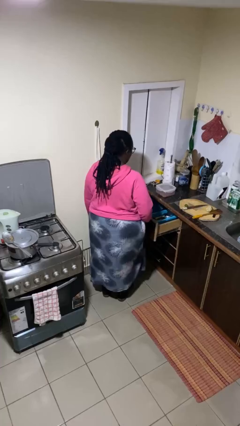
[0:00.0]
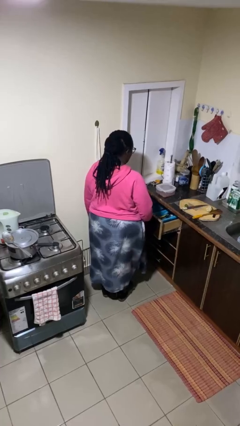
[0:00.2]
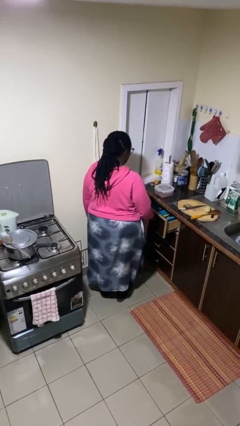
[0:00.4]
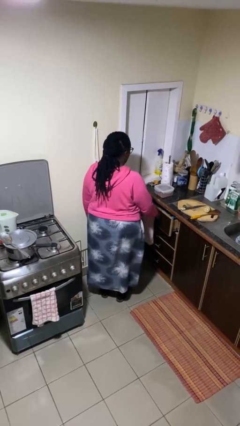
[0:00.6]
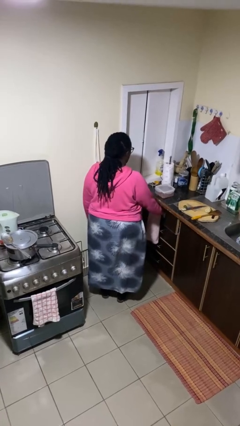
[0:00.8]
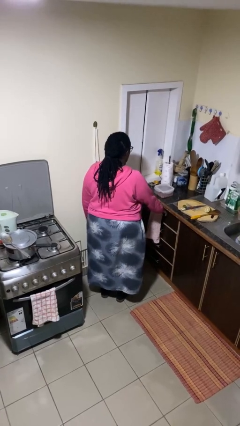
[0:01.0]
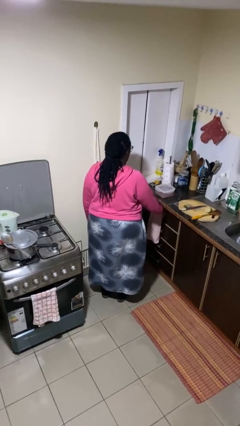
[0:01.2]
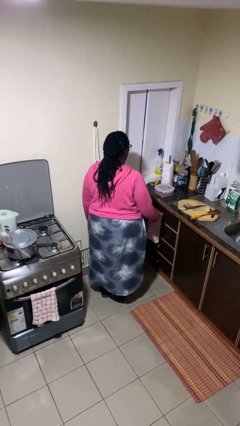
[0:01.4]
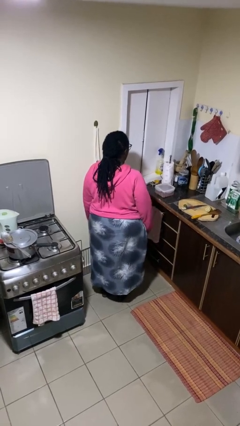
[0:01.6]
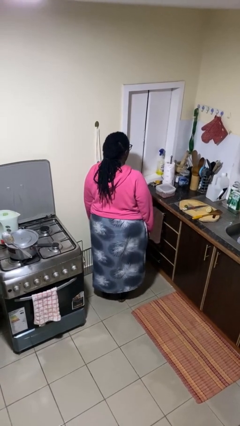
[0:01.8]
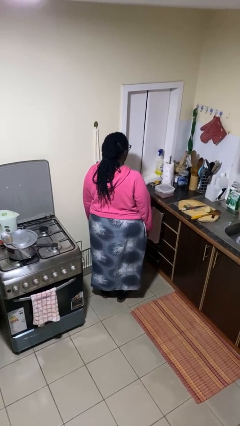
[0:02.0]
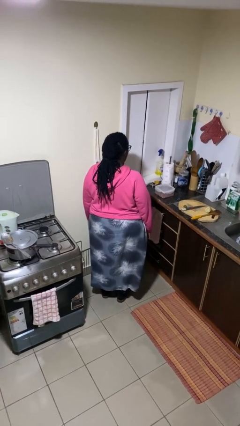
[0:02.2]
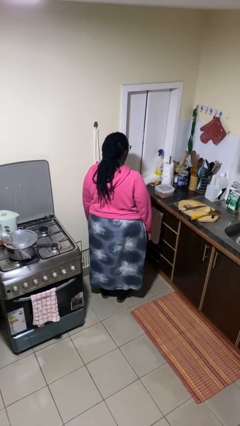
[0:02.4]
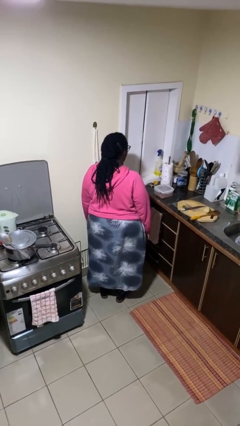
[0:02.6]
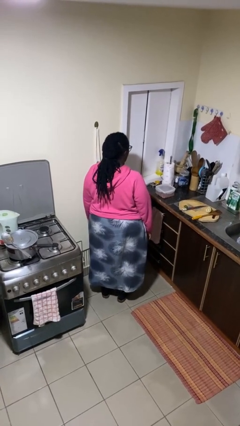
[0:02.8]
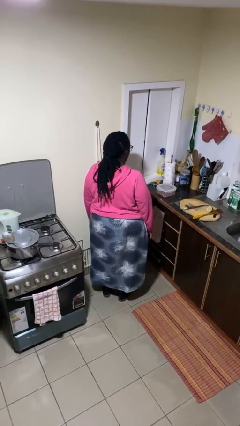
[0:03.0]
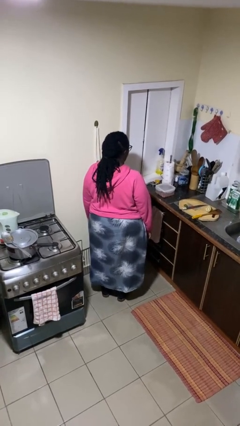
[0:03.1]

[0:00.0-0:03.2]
person closes kitchen drawer

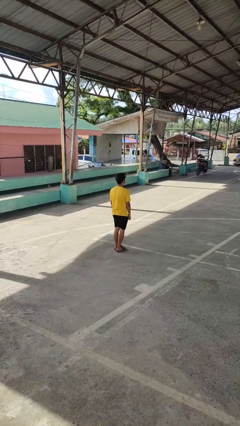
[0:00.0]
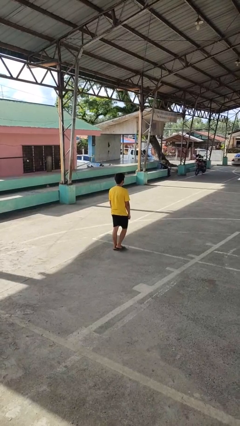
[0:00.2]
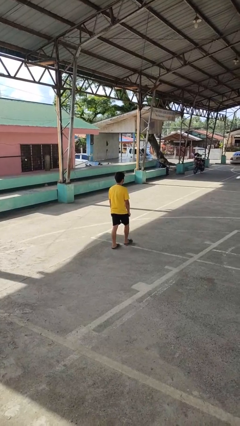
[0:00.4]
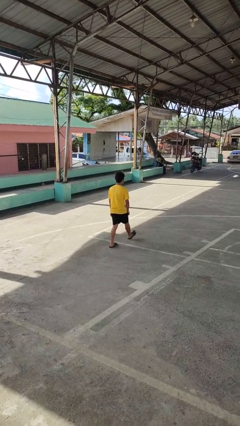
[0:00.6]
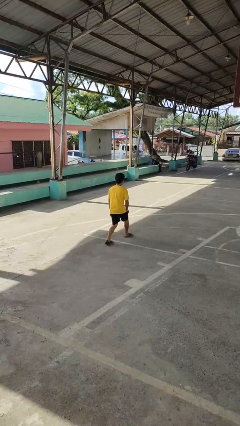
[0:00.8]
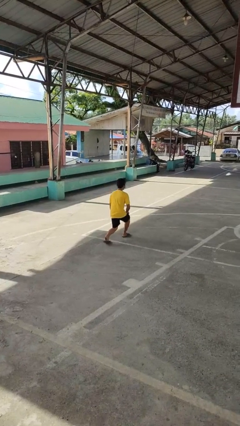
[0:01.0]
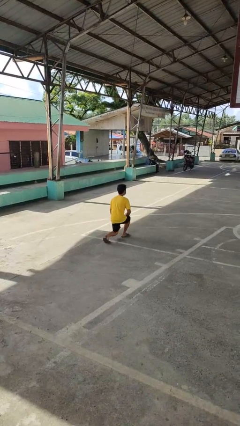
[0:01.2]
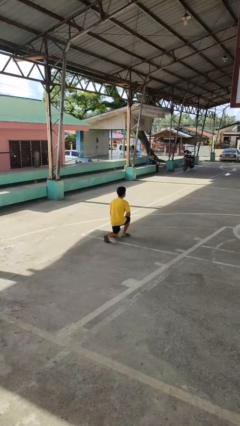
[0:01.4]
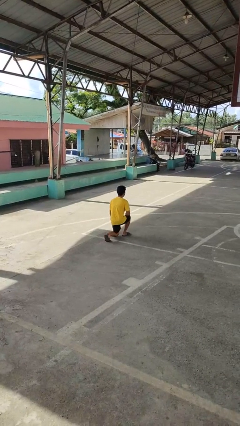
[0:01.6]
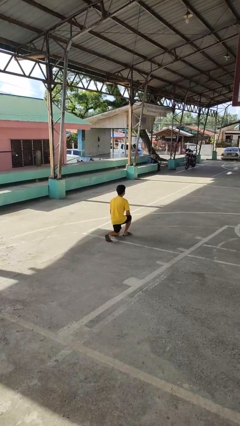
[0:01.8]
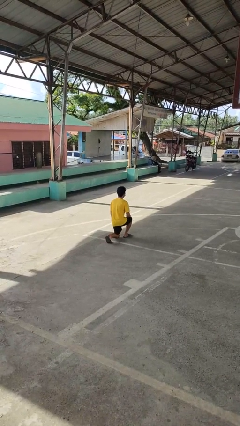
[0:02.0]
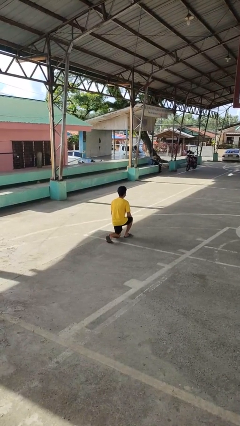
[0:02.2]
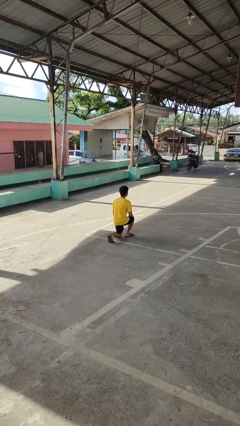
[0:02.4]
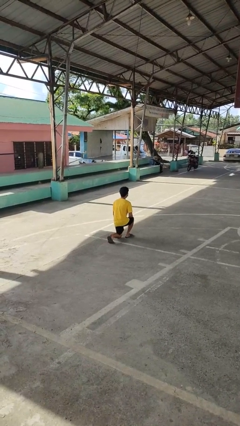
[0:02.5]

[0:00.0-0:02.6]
person kneels

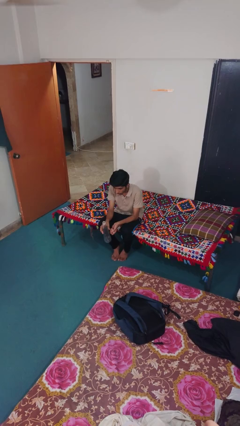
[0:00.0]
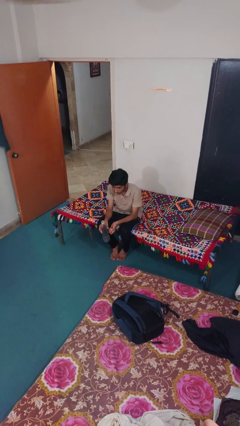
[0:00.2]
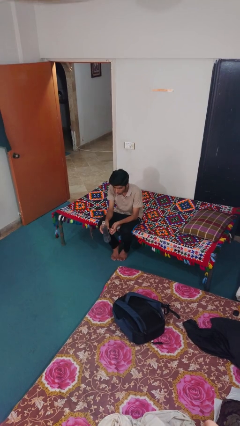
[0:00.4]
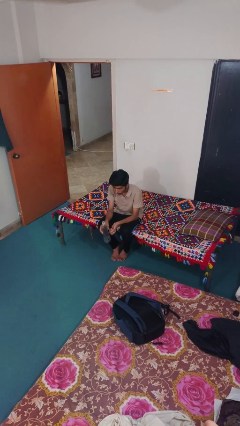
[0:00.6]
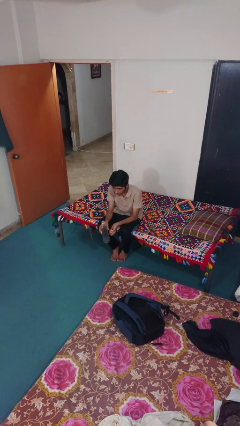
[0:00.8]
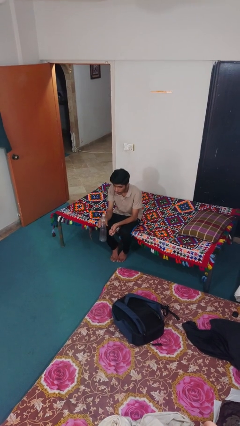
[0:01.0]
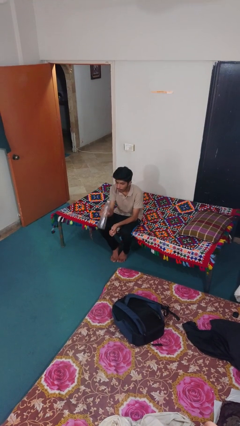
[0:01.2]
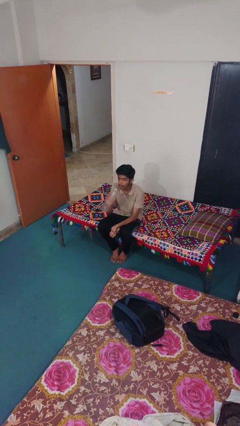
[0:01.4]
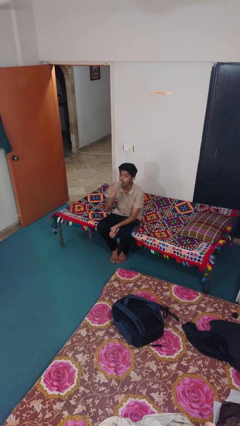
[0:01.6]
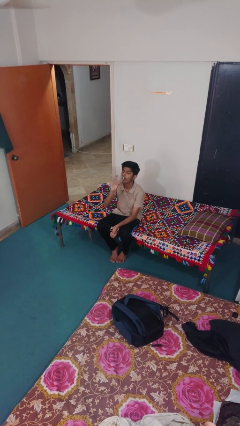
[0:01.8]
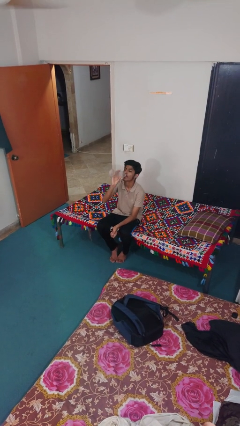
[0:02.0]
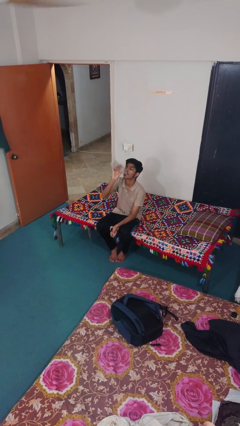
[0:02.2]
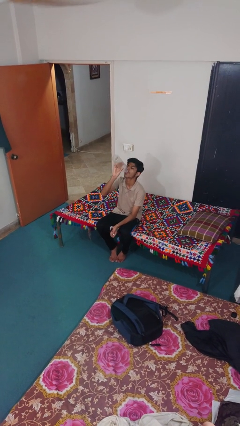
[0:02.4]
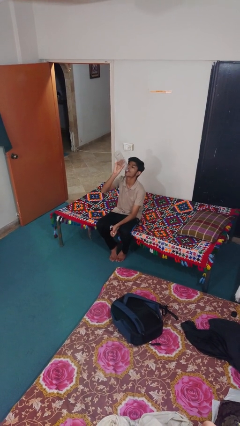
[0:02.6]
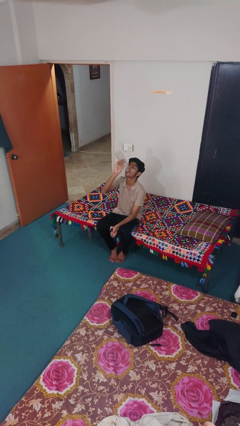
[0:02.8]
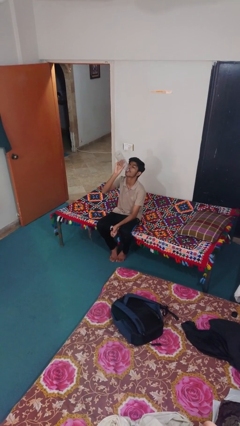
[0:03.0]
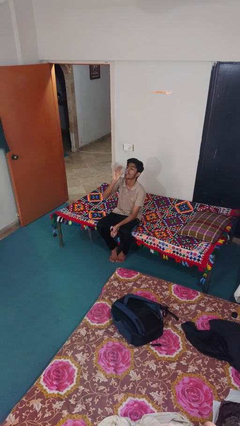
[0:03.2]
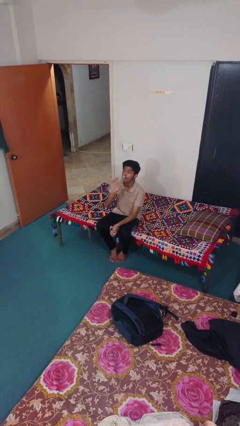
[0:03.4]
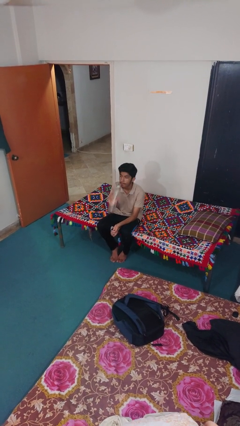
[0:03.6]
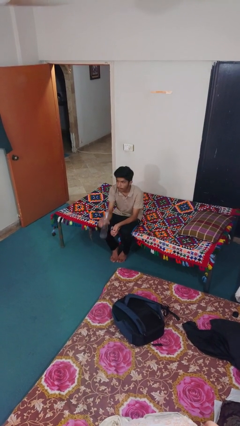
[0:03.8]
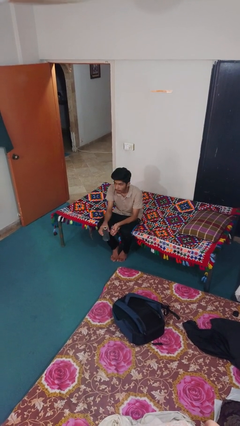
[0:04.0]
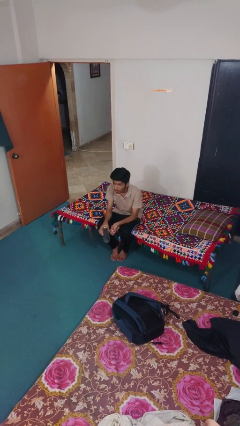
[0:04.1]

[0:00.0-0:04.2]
person drinks from bottle

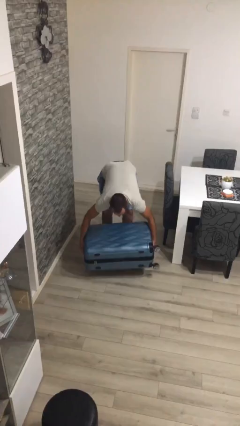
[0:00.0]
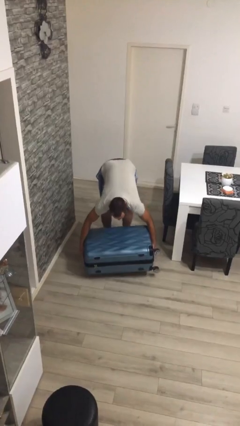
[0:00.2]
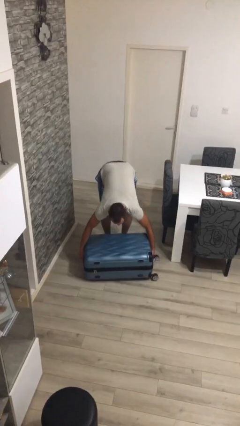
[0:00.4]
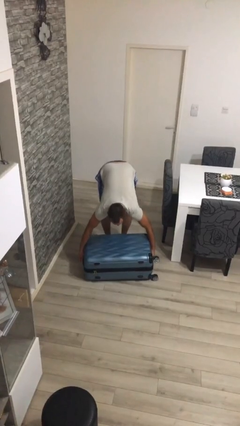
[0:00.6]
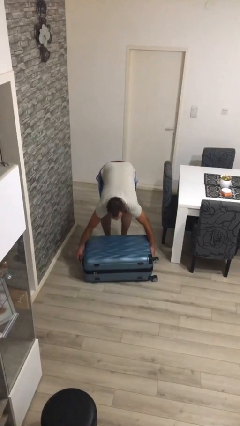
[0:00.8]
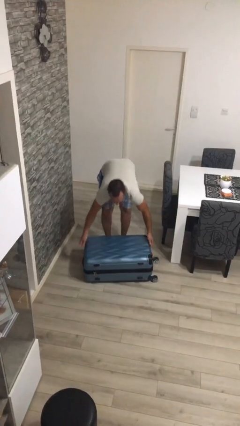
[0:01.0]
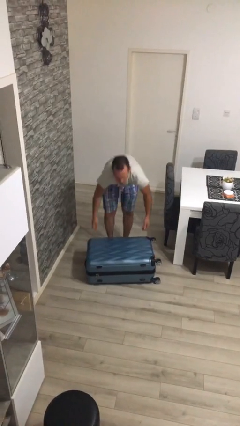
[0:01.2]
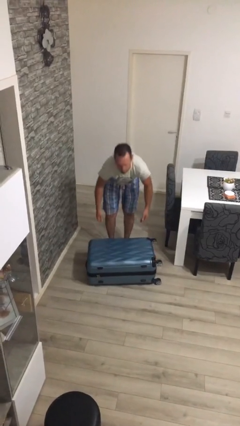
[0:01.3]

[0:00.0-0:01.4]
person puts down object on floor

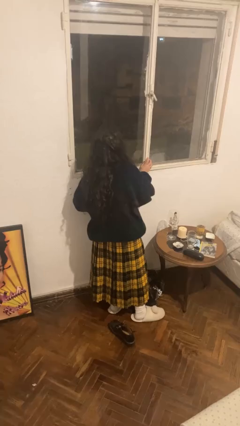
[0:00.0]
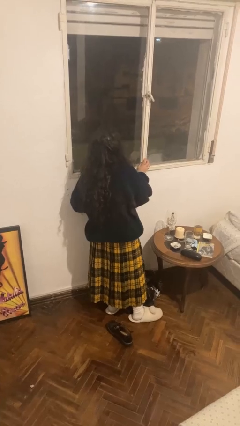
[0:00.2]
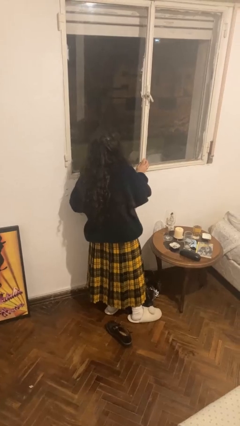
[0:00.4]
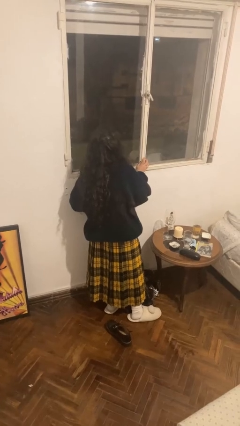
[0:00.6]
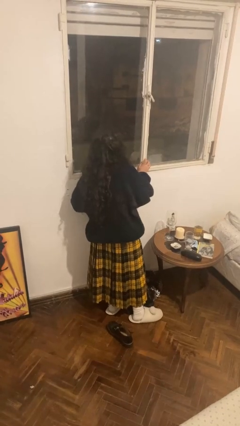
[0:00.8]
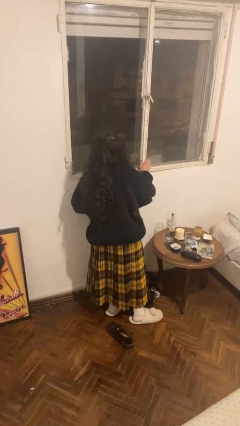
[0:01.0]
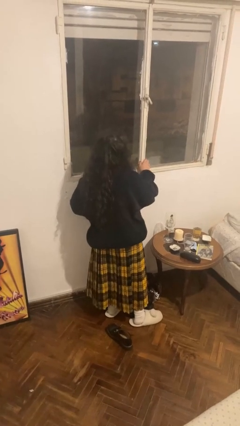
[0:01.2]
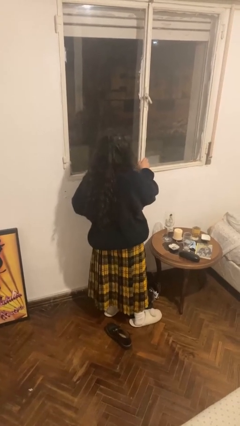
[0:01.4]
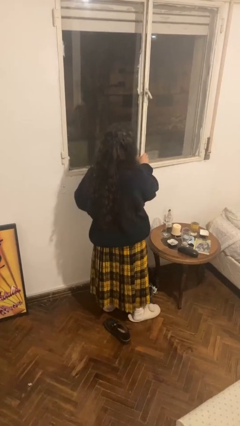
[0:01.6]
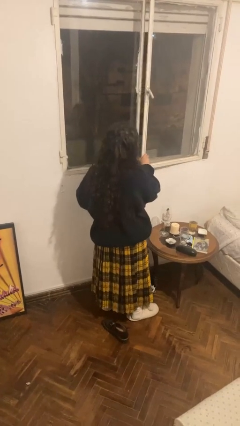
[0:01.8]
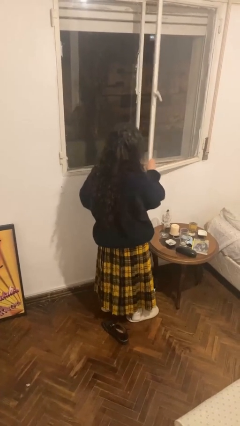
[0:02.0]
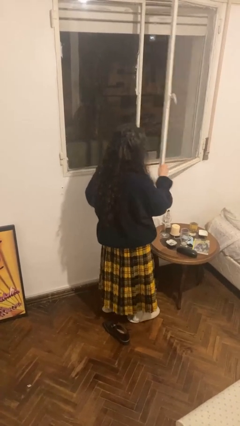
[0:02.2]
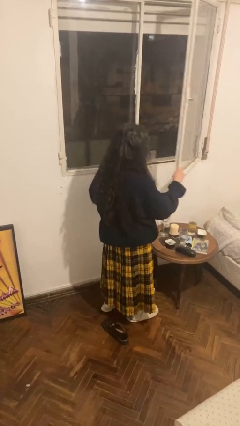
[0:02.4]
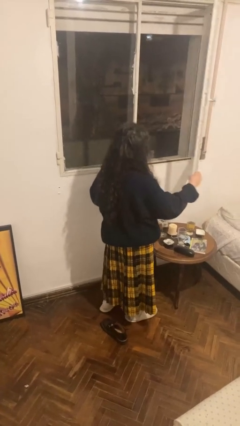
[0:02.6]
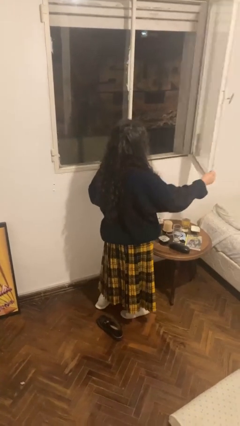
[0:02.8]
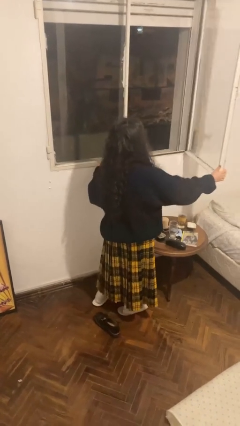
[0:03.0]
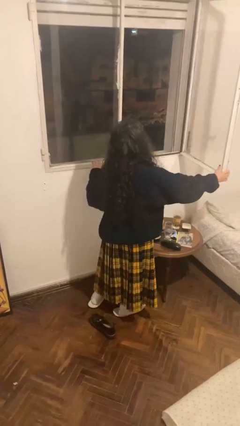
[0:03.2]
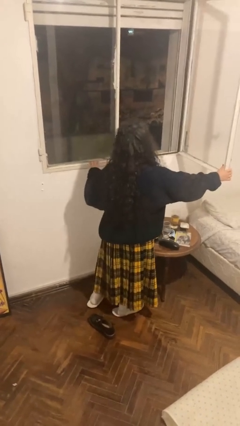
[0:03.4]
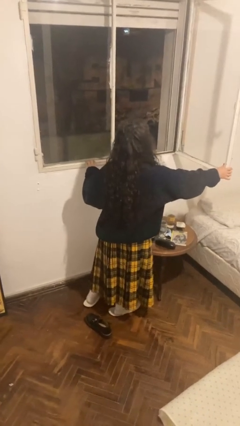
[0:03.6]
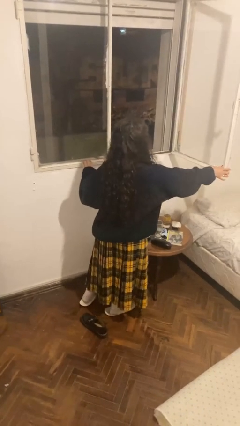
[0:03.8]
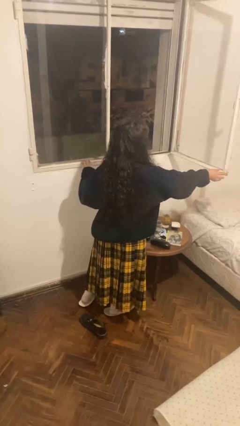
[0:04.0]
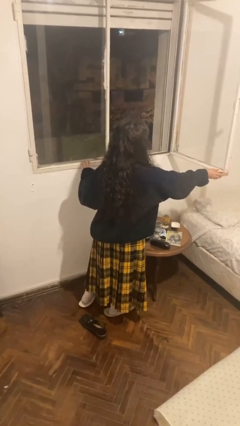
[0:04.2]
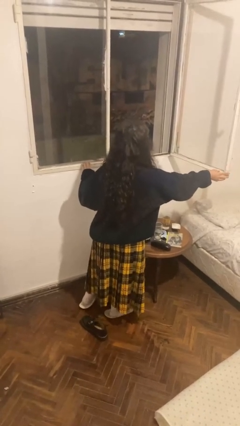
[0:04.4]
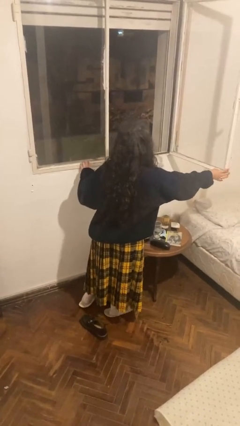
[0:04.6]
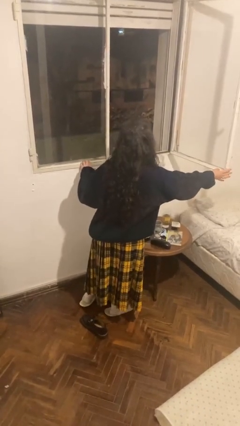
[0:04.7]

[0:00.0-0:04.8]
person opens home window

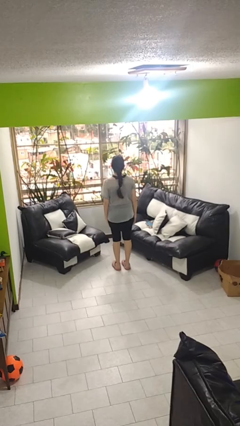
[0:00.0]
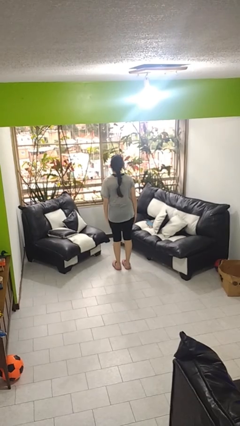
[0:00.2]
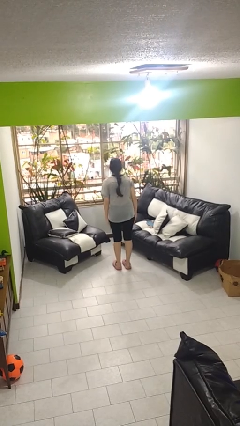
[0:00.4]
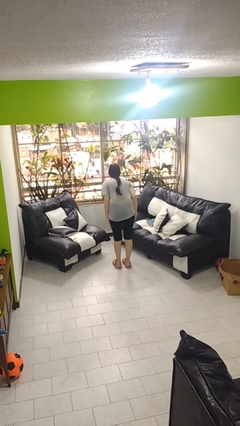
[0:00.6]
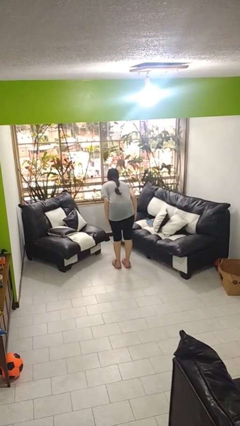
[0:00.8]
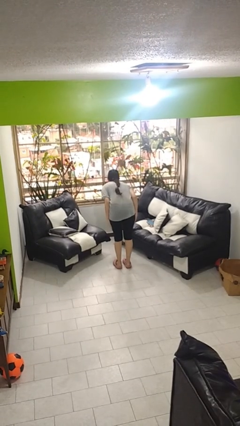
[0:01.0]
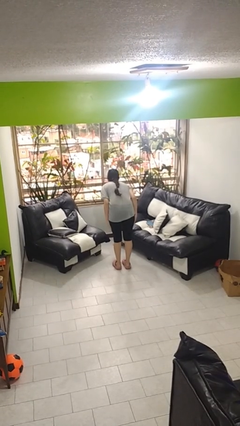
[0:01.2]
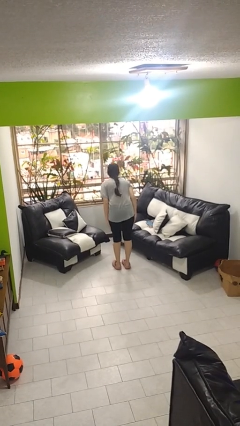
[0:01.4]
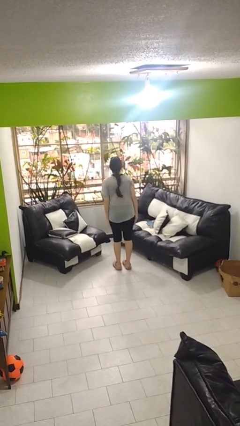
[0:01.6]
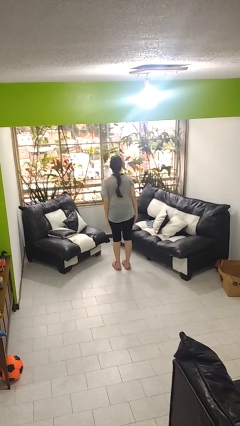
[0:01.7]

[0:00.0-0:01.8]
person bows
